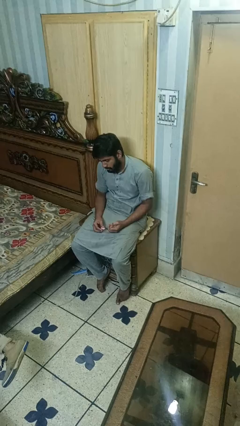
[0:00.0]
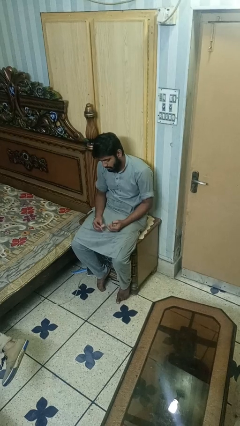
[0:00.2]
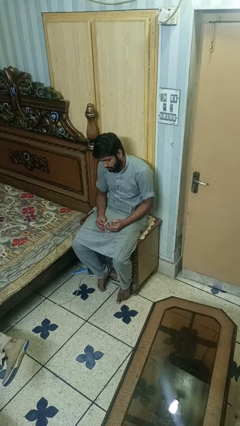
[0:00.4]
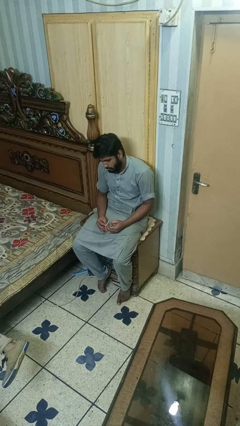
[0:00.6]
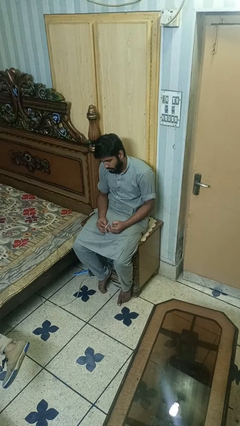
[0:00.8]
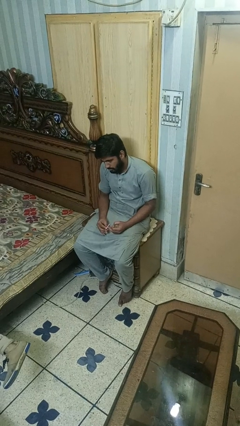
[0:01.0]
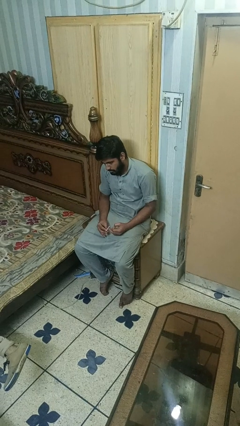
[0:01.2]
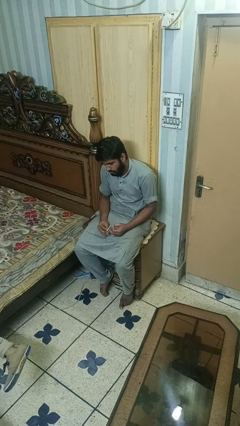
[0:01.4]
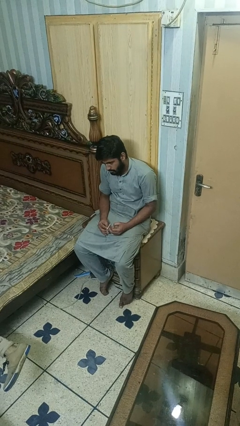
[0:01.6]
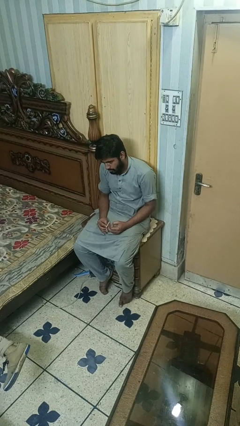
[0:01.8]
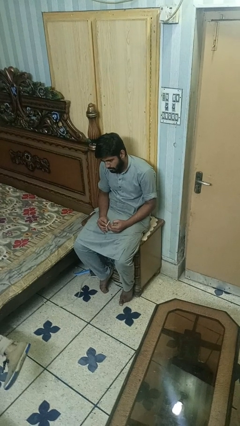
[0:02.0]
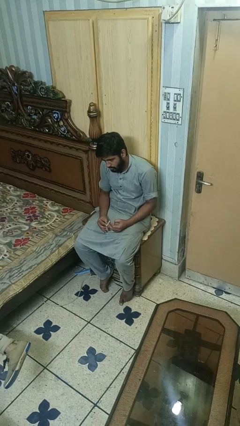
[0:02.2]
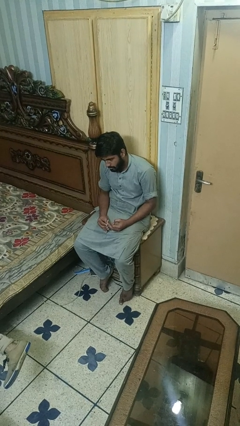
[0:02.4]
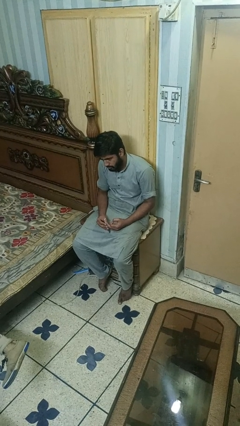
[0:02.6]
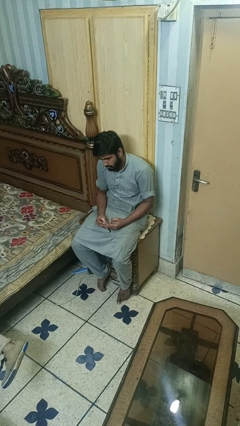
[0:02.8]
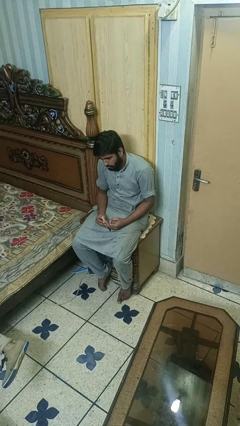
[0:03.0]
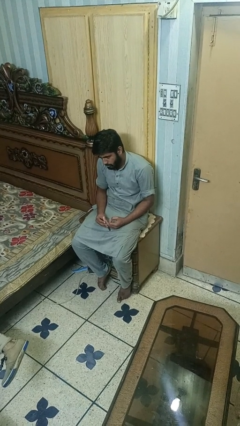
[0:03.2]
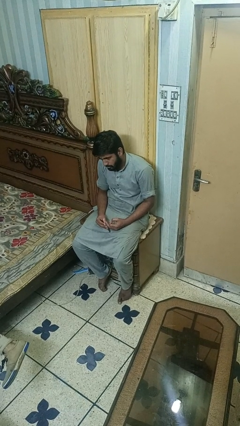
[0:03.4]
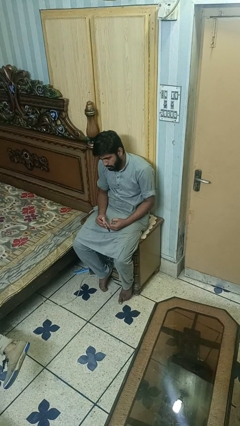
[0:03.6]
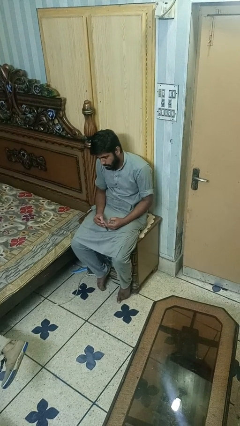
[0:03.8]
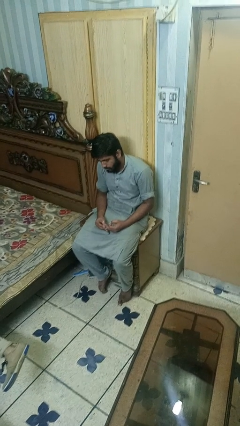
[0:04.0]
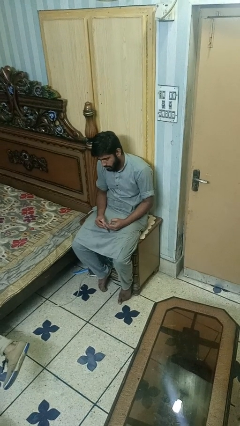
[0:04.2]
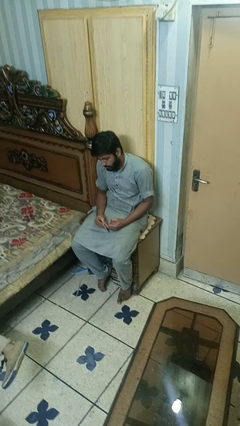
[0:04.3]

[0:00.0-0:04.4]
person files fingernails

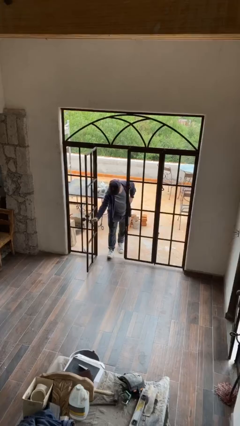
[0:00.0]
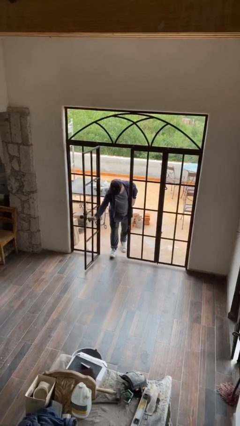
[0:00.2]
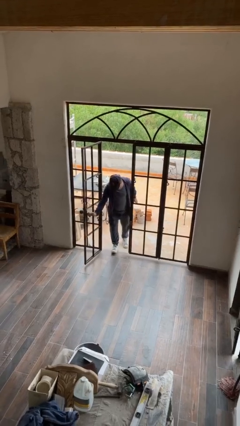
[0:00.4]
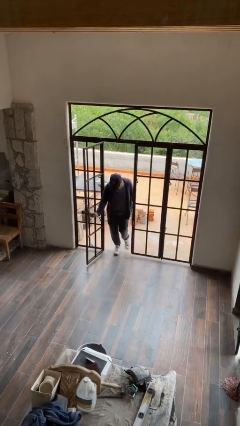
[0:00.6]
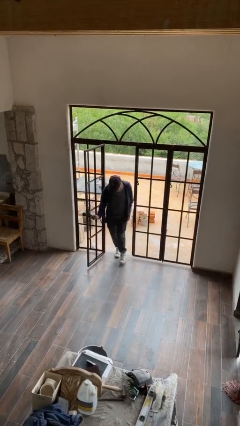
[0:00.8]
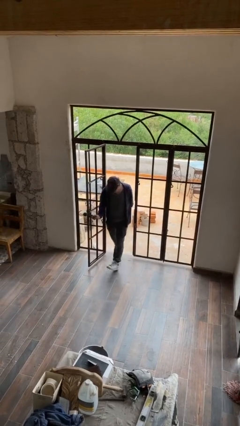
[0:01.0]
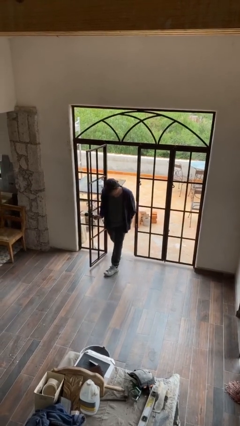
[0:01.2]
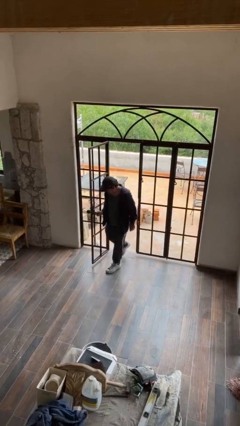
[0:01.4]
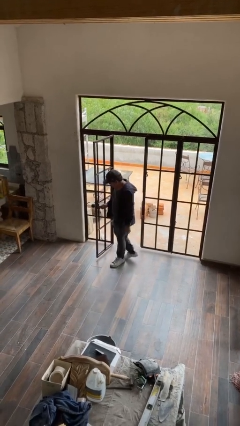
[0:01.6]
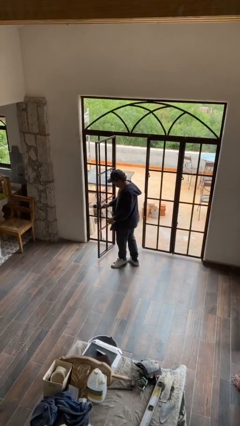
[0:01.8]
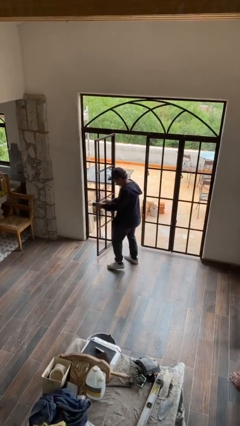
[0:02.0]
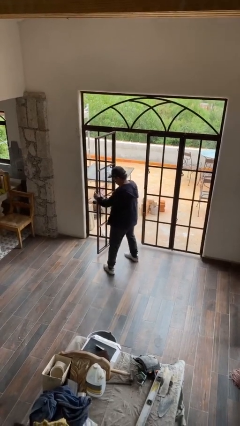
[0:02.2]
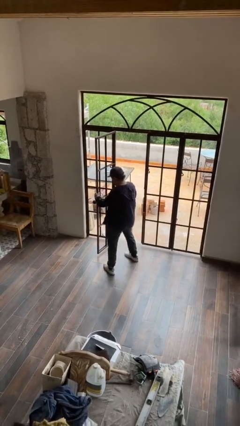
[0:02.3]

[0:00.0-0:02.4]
person enters scene through structure

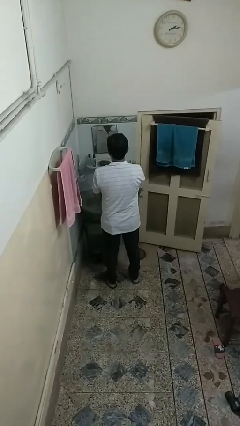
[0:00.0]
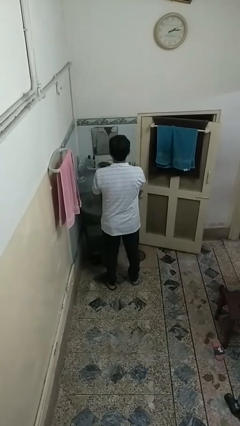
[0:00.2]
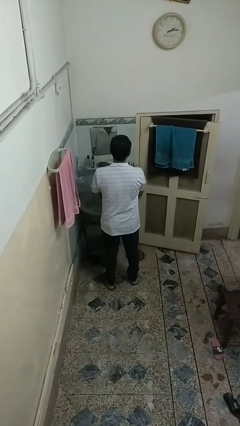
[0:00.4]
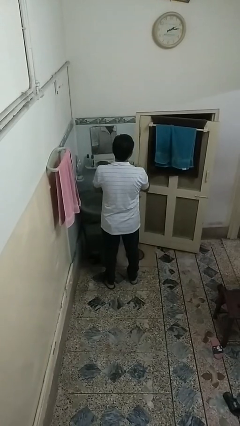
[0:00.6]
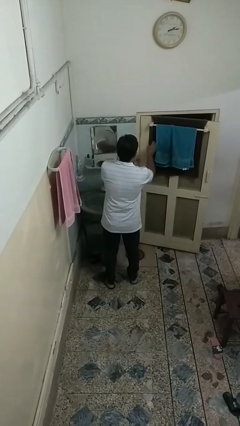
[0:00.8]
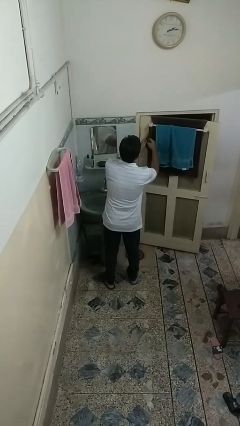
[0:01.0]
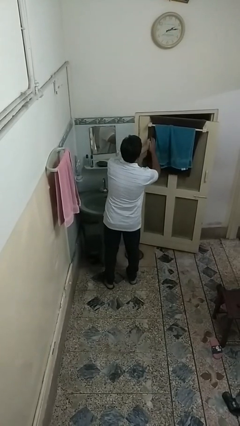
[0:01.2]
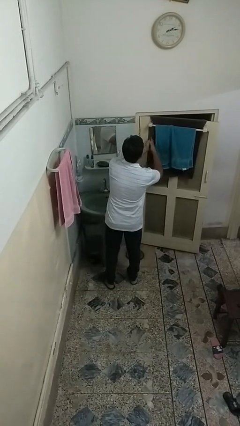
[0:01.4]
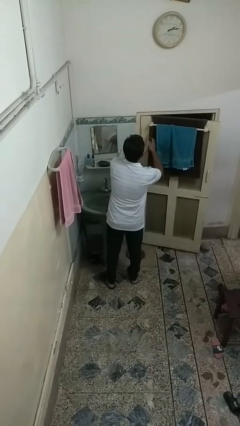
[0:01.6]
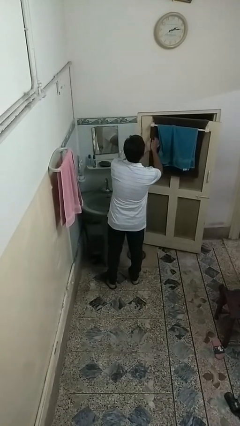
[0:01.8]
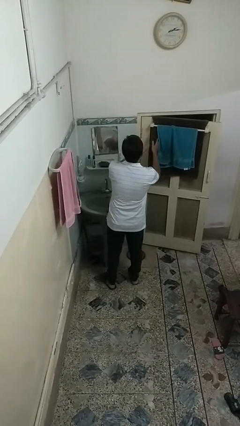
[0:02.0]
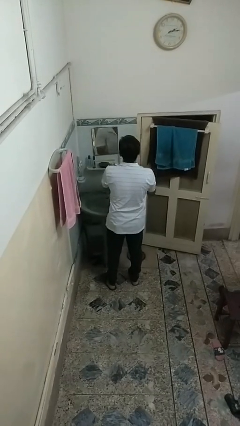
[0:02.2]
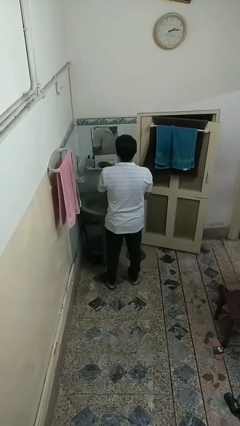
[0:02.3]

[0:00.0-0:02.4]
person dries hands with towel

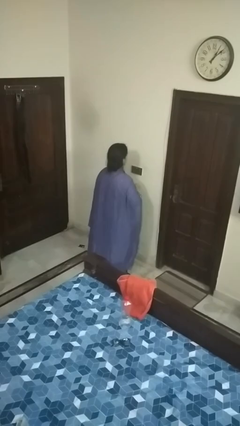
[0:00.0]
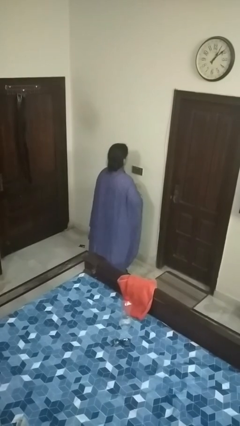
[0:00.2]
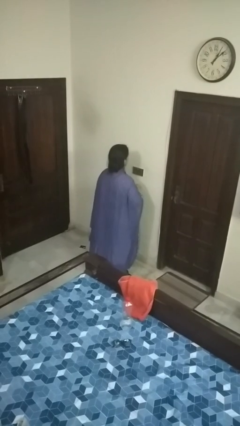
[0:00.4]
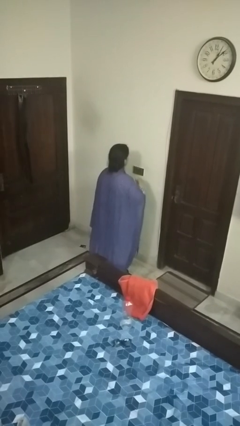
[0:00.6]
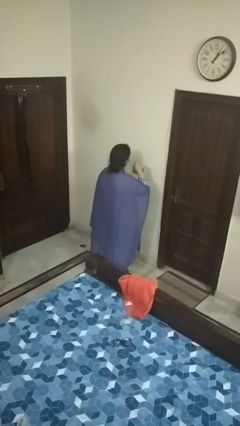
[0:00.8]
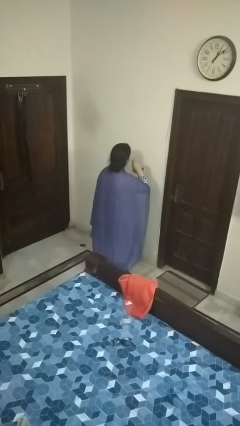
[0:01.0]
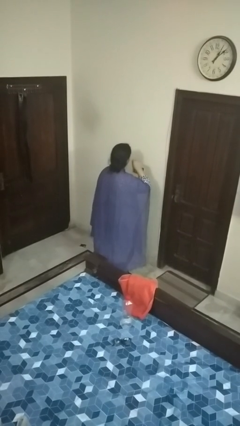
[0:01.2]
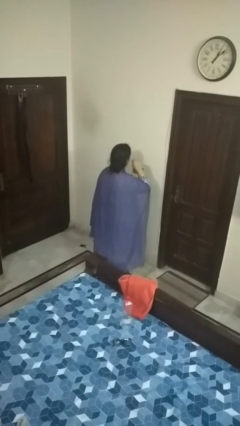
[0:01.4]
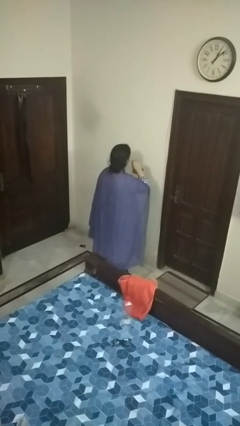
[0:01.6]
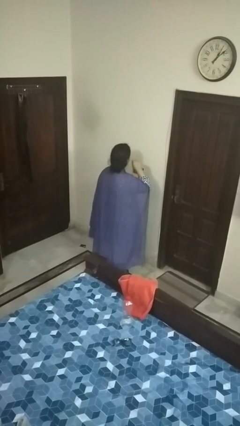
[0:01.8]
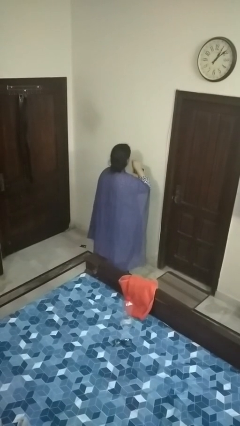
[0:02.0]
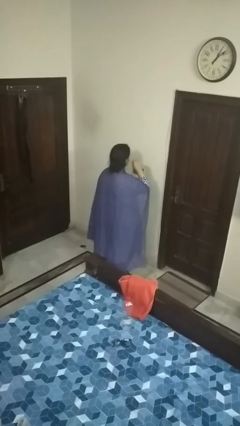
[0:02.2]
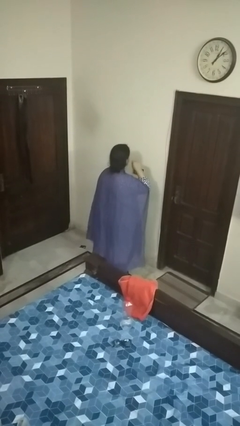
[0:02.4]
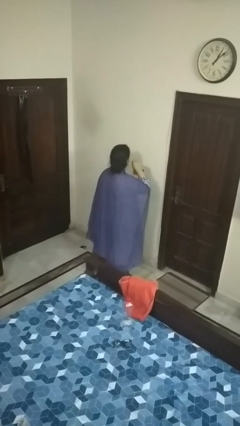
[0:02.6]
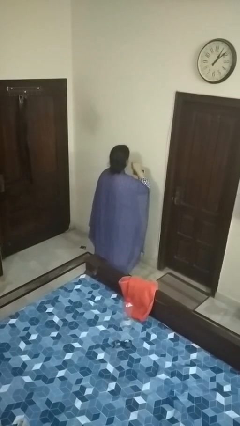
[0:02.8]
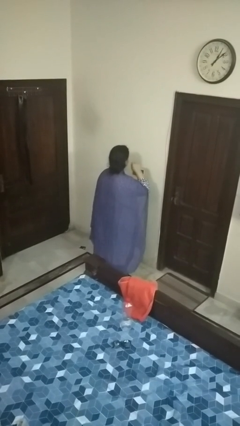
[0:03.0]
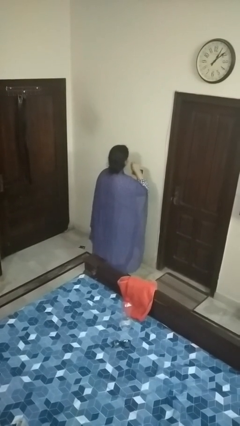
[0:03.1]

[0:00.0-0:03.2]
person brushes teeth

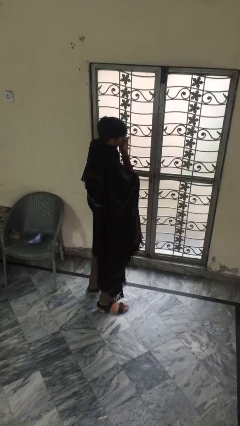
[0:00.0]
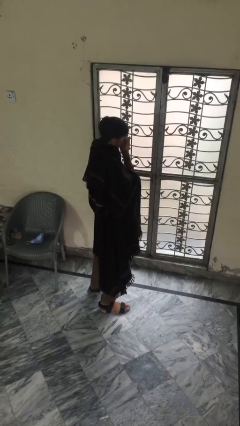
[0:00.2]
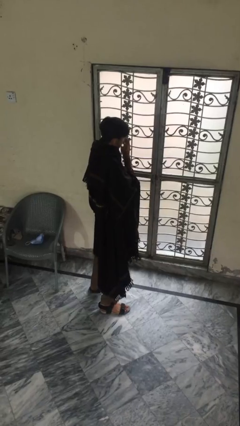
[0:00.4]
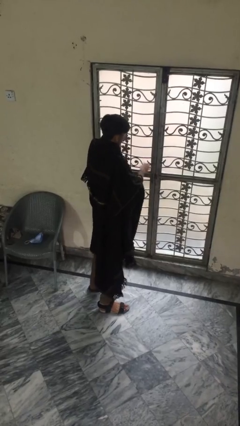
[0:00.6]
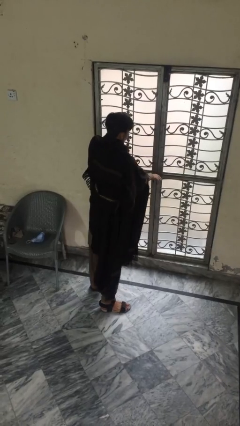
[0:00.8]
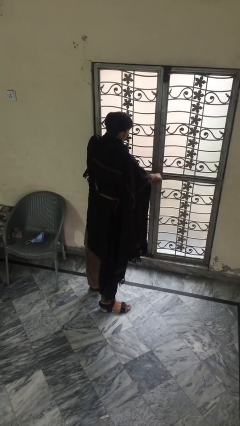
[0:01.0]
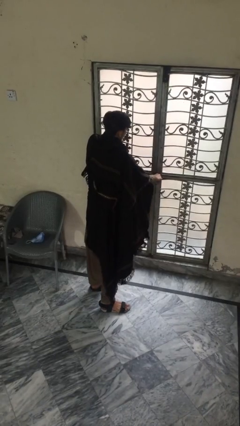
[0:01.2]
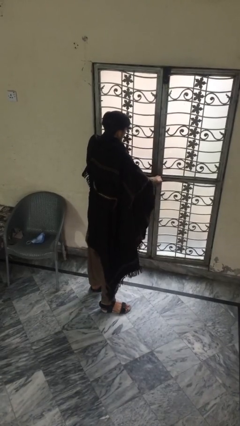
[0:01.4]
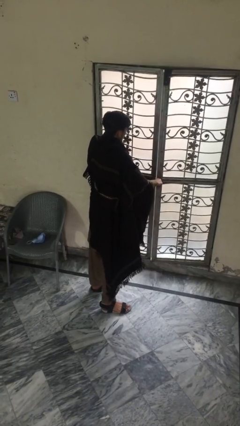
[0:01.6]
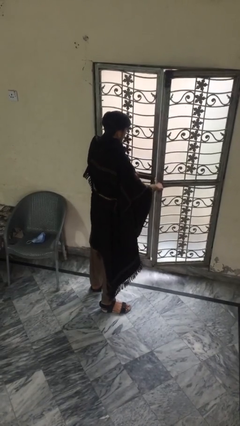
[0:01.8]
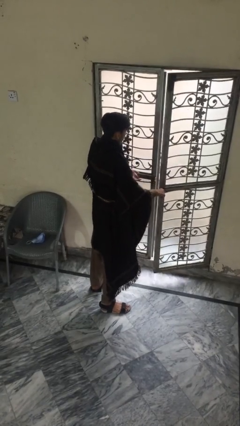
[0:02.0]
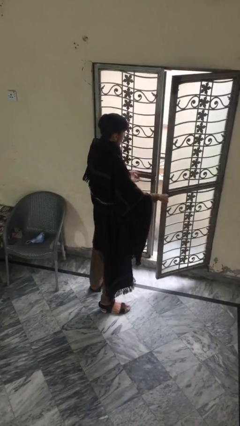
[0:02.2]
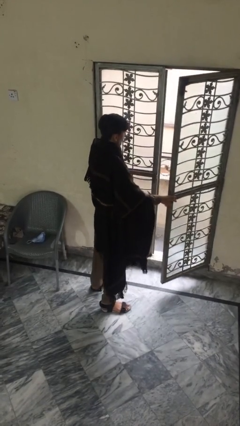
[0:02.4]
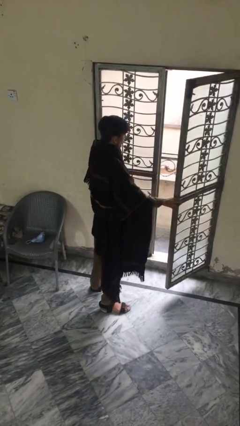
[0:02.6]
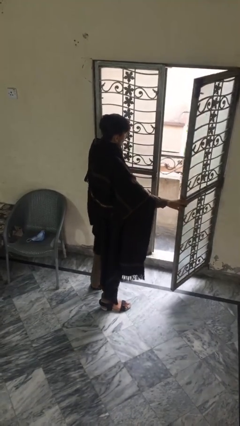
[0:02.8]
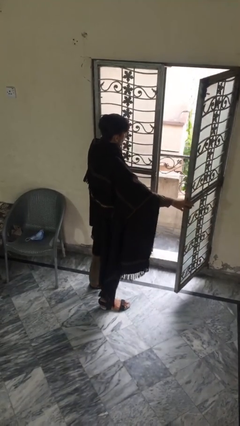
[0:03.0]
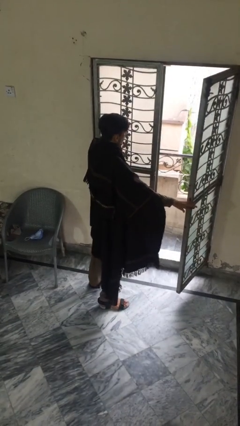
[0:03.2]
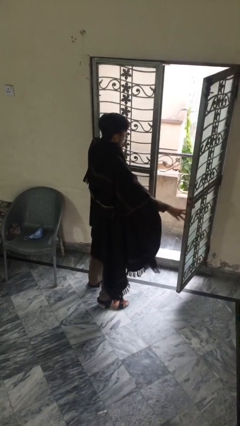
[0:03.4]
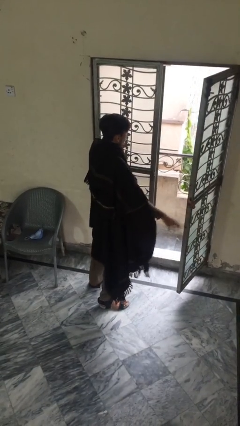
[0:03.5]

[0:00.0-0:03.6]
person opens facility door

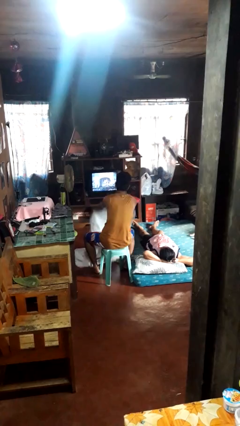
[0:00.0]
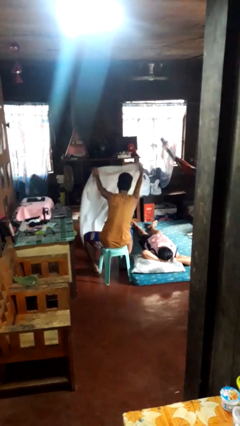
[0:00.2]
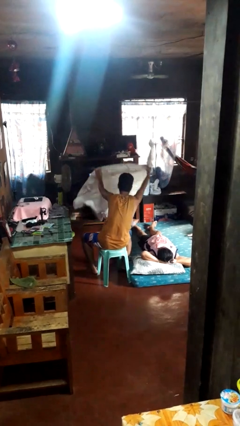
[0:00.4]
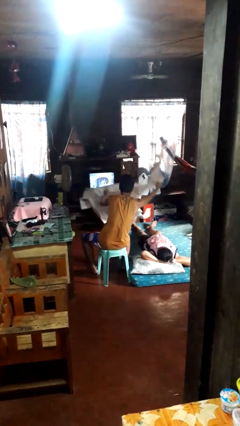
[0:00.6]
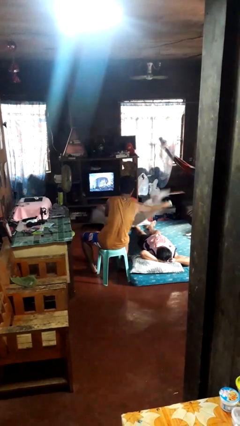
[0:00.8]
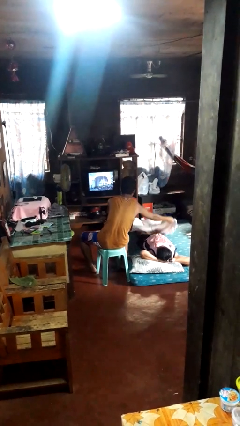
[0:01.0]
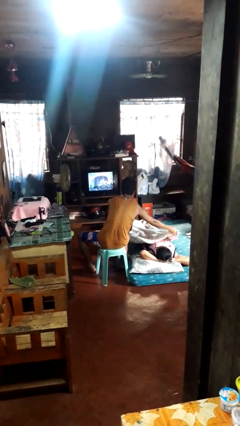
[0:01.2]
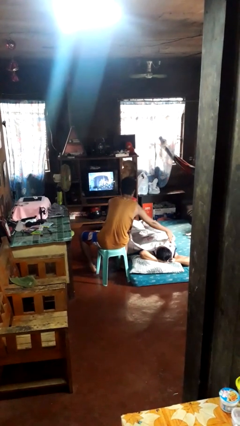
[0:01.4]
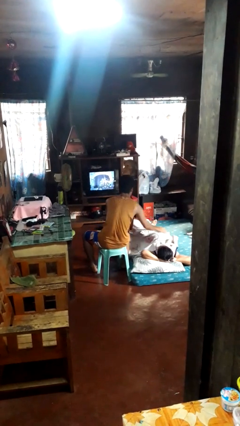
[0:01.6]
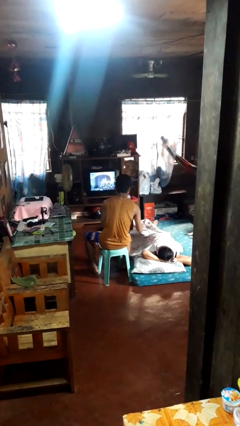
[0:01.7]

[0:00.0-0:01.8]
person covers friend with blanket
